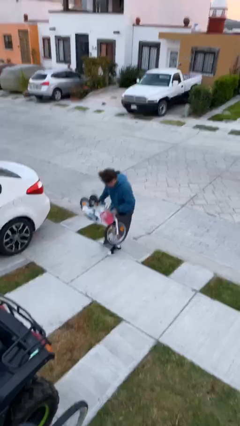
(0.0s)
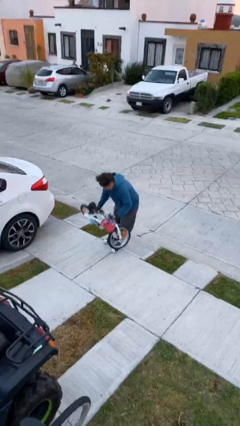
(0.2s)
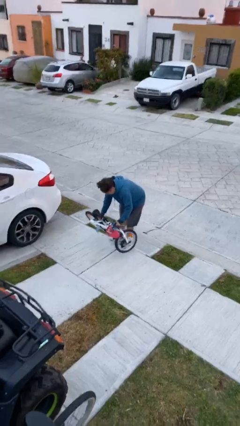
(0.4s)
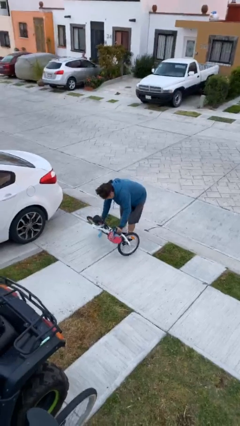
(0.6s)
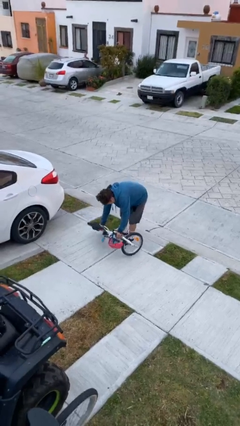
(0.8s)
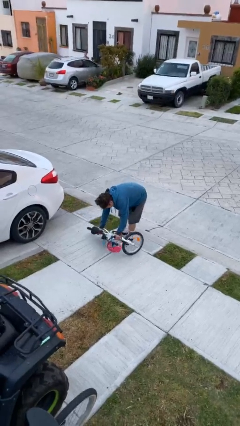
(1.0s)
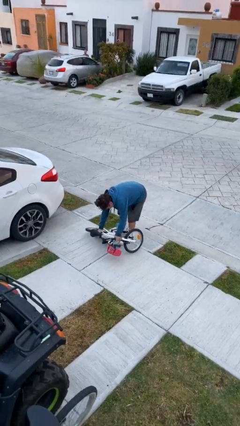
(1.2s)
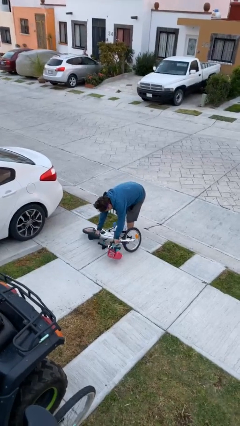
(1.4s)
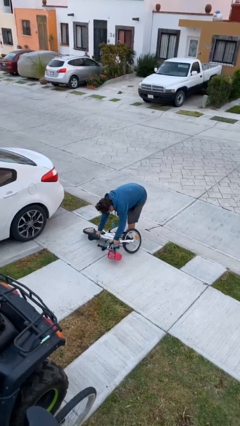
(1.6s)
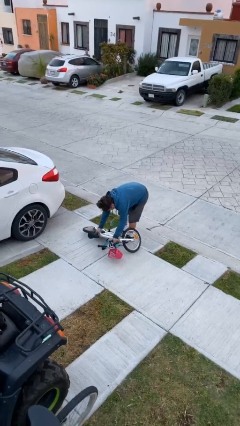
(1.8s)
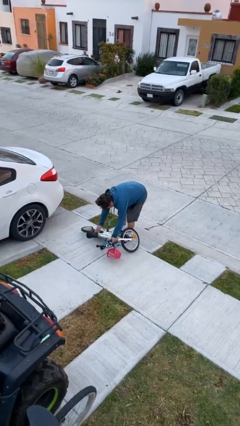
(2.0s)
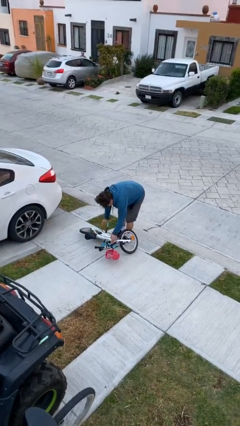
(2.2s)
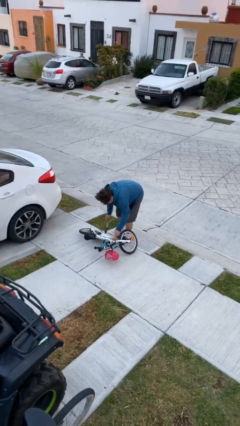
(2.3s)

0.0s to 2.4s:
person puts down object on floor

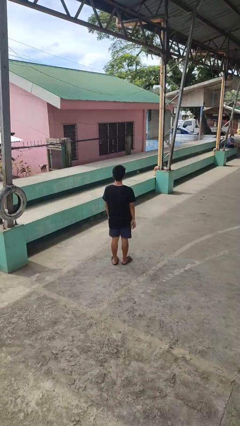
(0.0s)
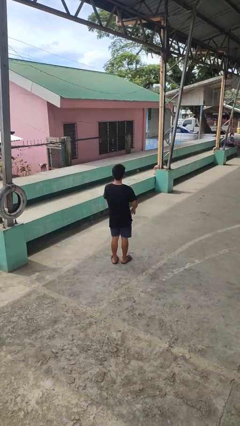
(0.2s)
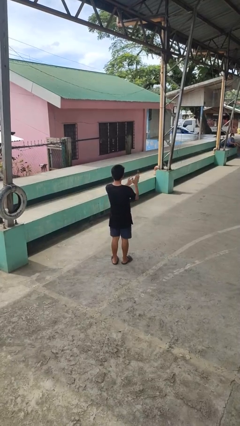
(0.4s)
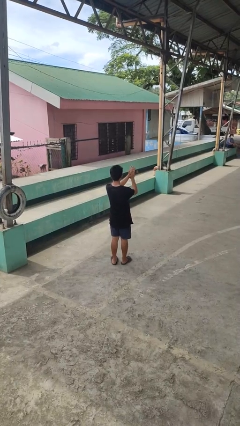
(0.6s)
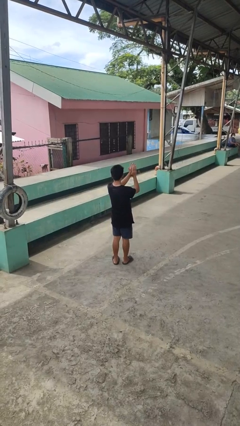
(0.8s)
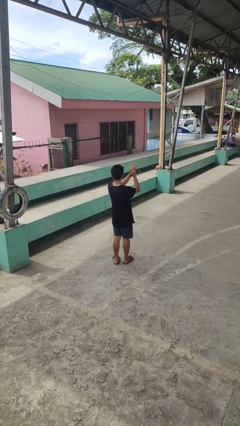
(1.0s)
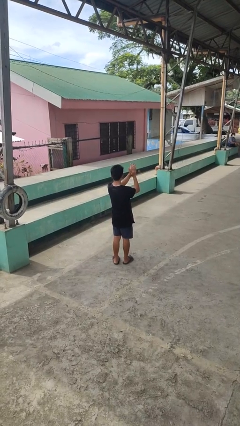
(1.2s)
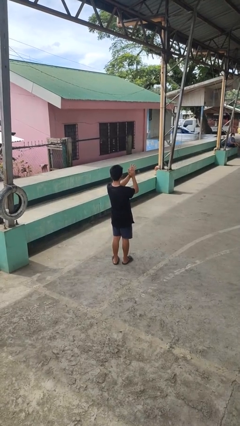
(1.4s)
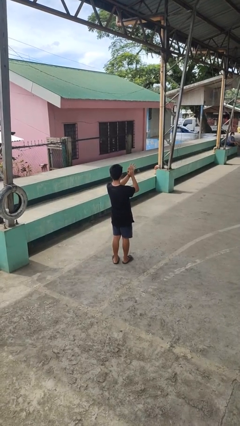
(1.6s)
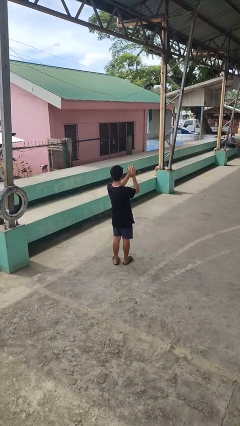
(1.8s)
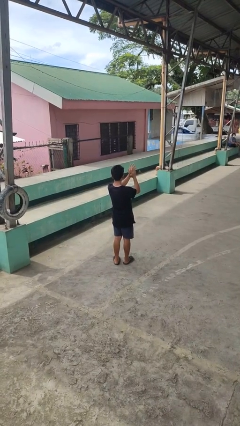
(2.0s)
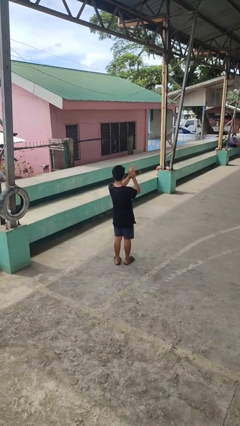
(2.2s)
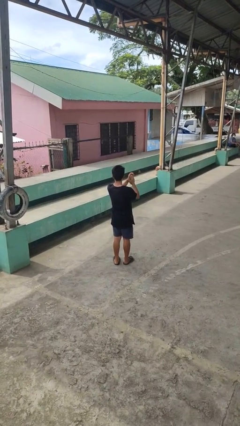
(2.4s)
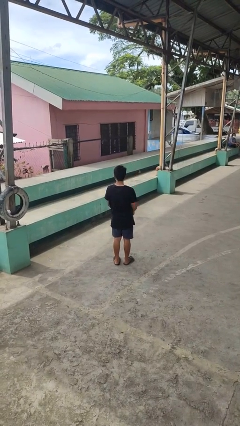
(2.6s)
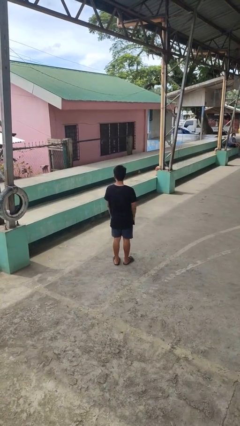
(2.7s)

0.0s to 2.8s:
person claps hands

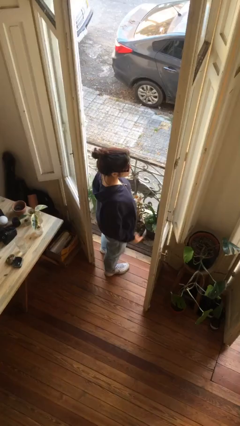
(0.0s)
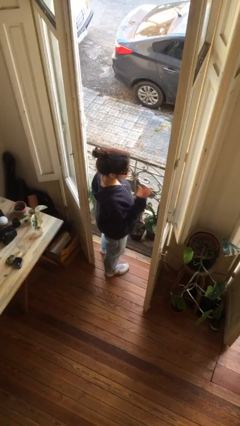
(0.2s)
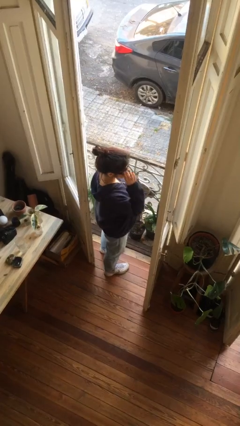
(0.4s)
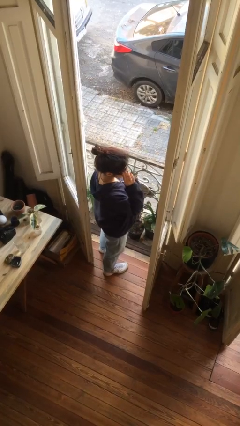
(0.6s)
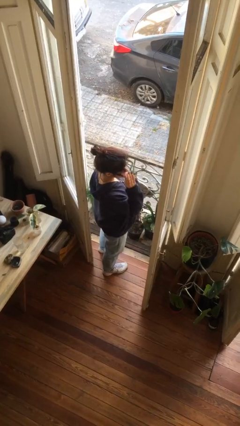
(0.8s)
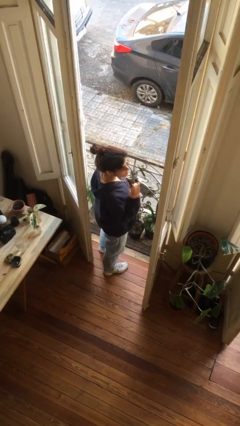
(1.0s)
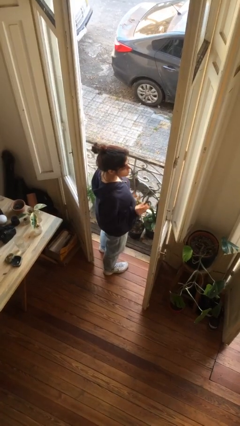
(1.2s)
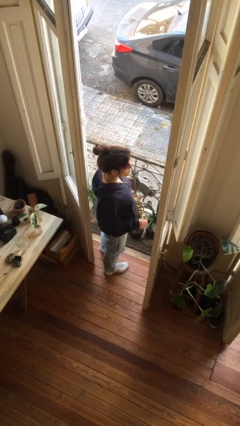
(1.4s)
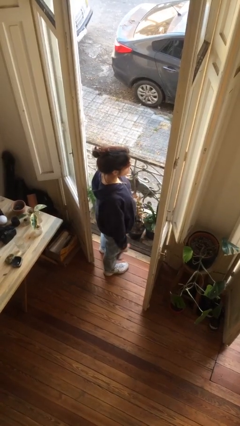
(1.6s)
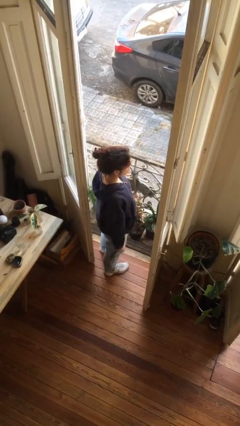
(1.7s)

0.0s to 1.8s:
person takes off sunglasses

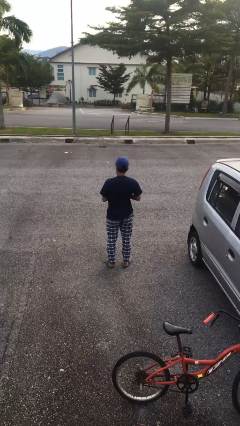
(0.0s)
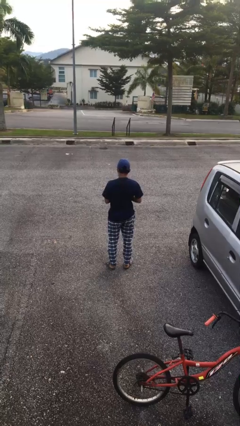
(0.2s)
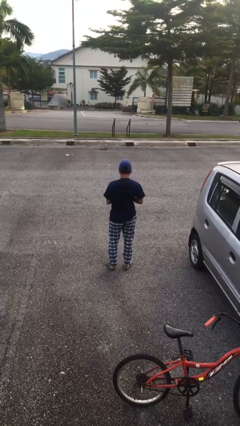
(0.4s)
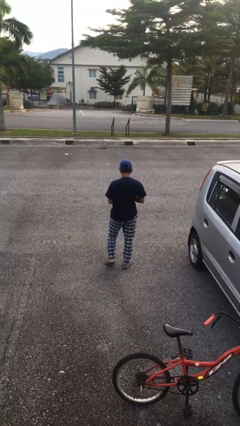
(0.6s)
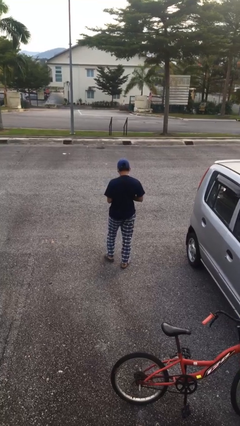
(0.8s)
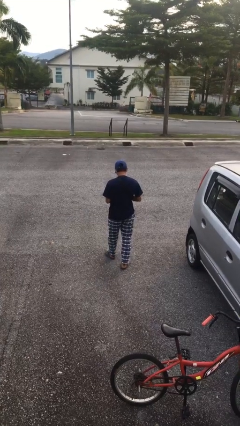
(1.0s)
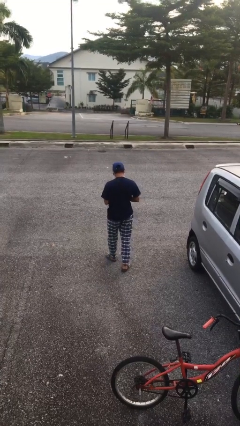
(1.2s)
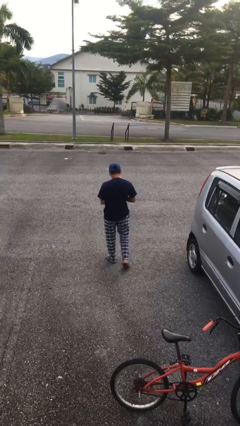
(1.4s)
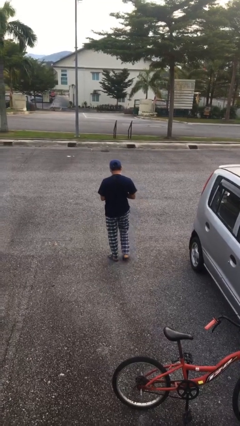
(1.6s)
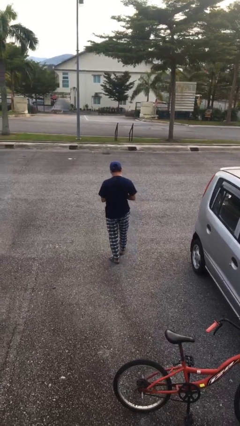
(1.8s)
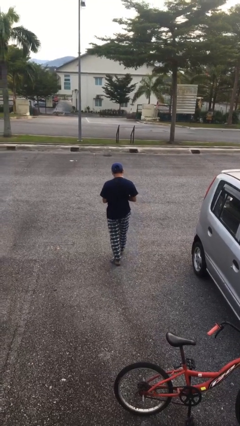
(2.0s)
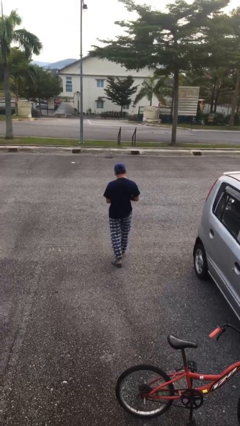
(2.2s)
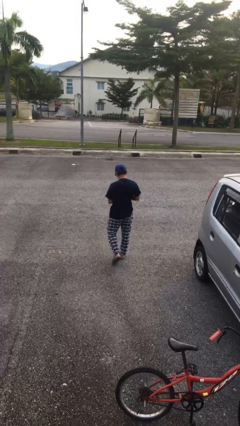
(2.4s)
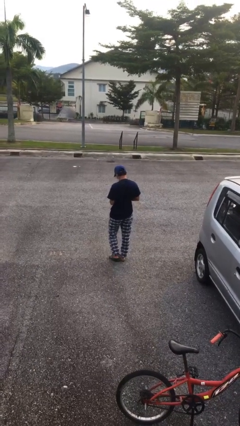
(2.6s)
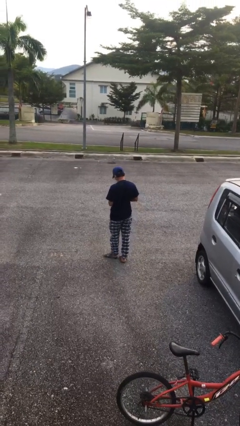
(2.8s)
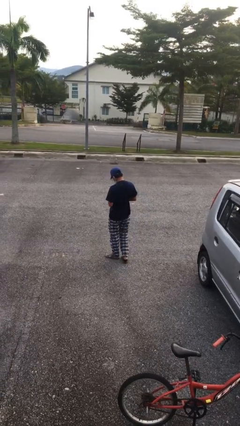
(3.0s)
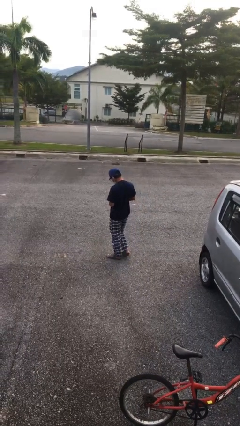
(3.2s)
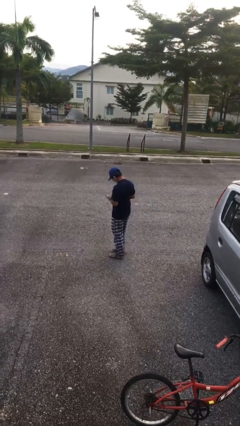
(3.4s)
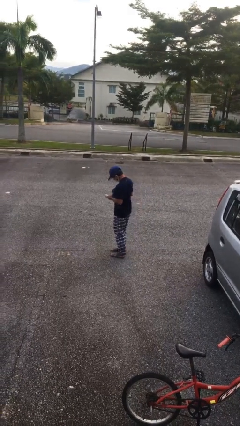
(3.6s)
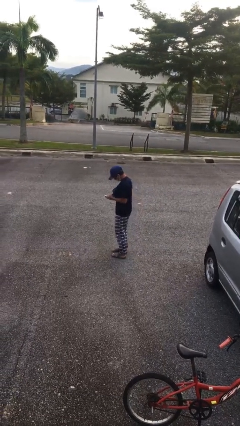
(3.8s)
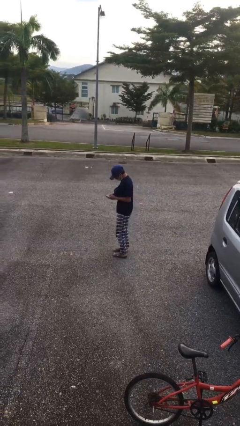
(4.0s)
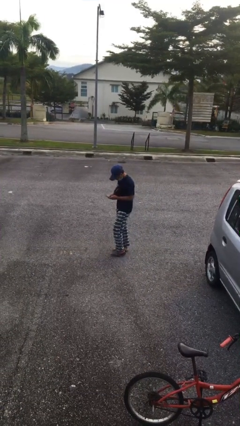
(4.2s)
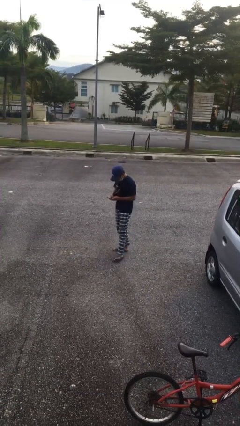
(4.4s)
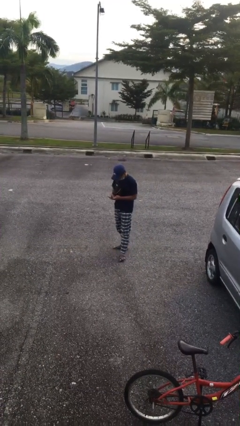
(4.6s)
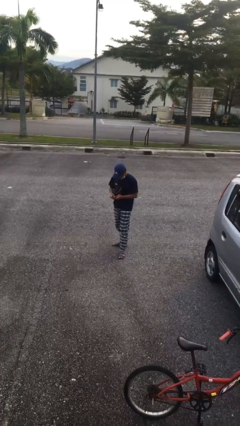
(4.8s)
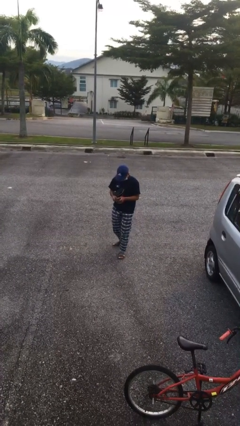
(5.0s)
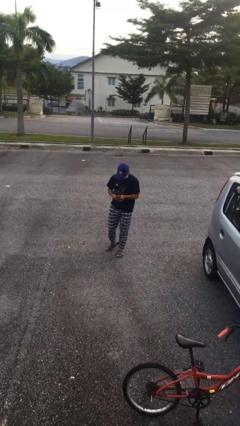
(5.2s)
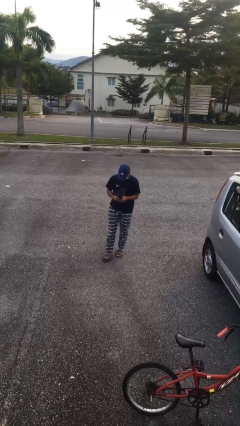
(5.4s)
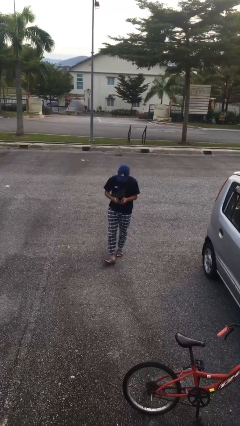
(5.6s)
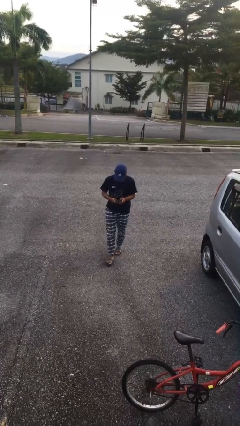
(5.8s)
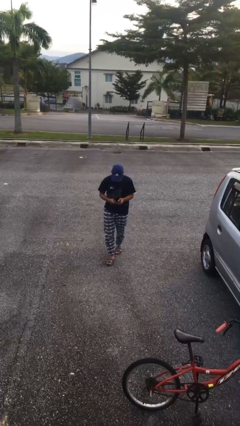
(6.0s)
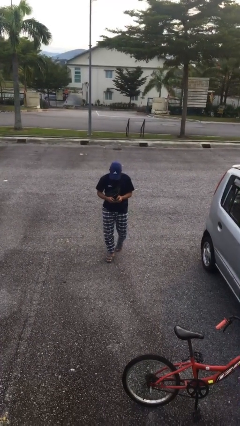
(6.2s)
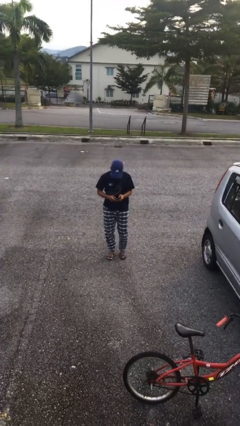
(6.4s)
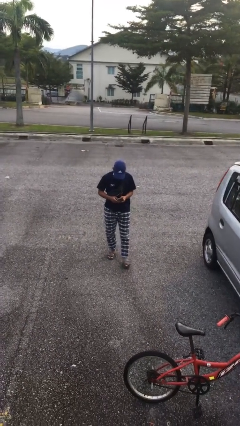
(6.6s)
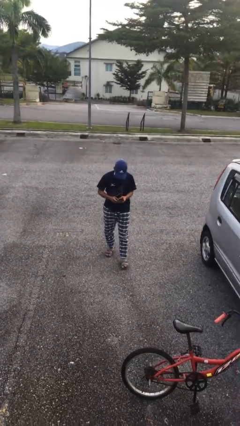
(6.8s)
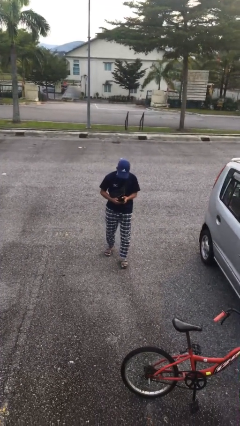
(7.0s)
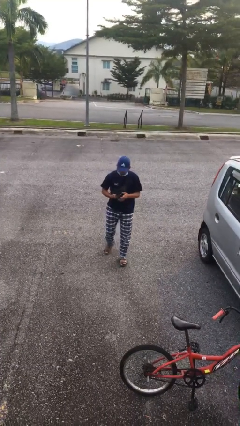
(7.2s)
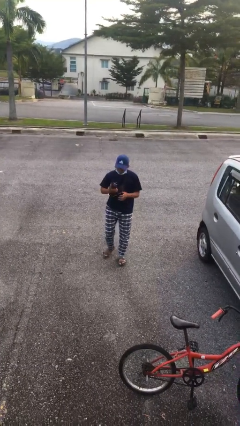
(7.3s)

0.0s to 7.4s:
person texts on phone

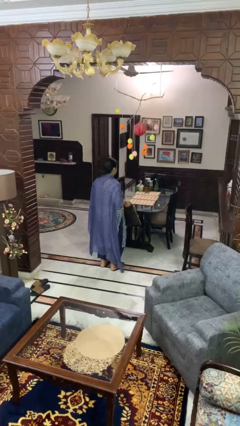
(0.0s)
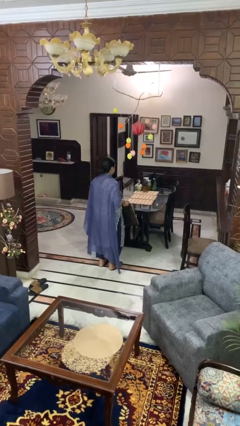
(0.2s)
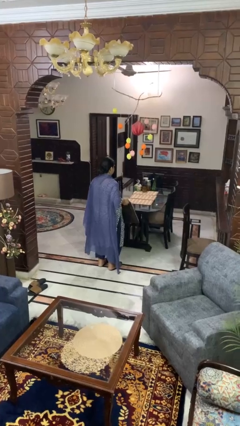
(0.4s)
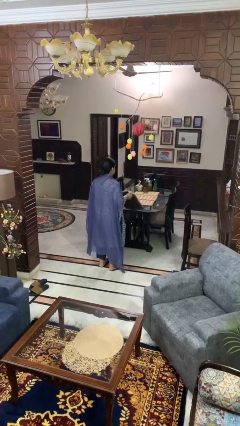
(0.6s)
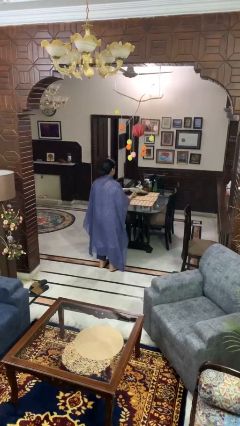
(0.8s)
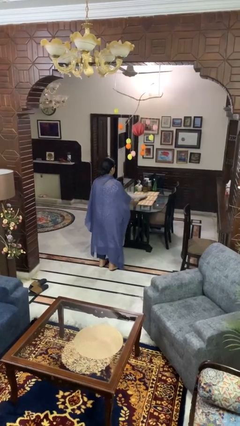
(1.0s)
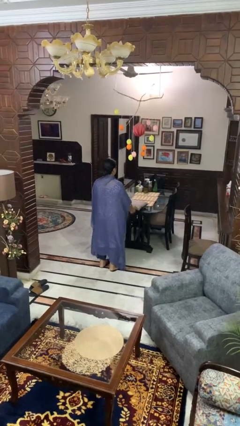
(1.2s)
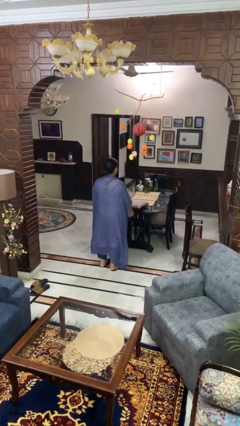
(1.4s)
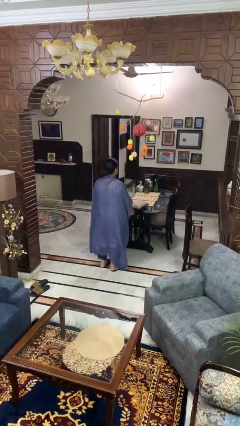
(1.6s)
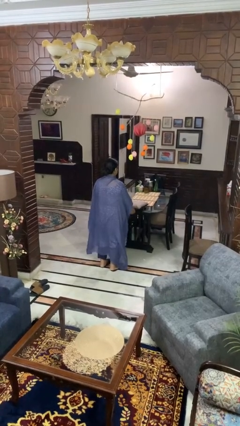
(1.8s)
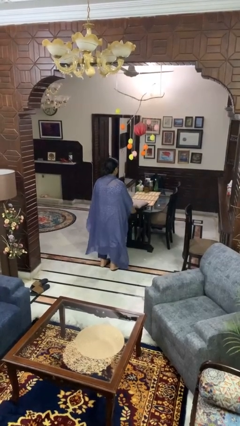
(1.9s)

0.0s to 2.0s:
person throws object on table

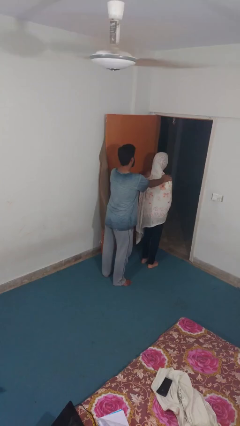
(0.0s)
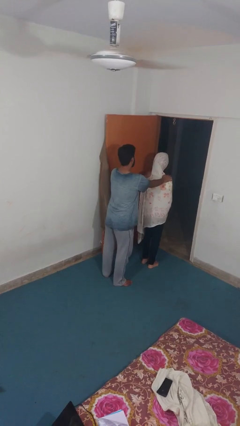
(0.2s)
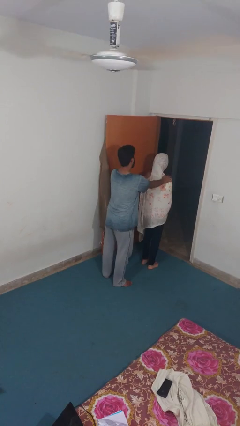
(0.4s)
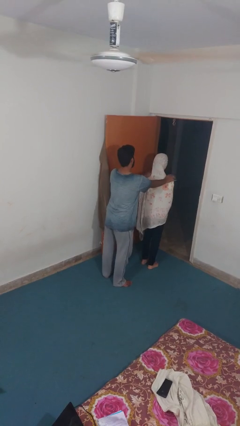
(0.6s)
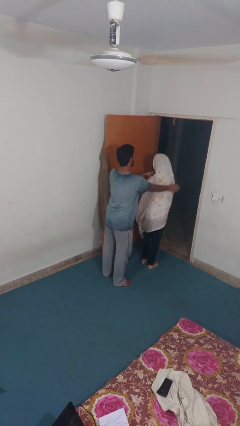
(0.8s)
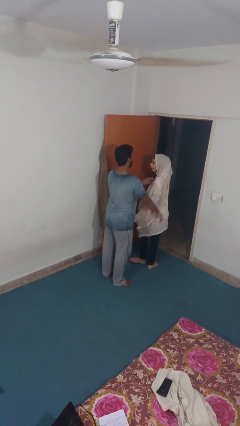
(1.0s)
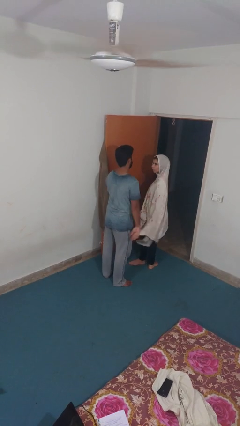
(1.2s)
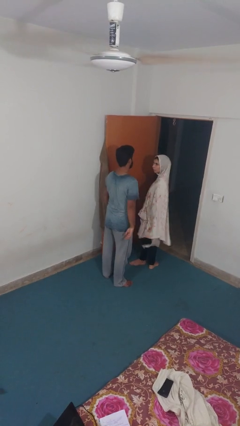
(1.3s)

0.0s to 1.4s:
person spins person around
